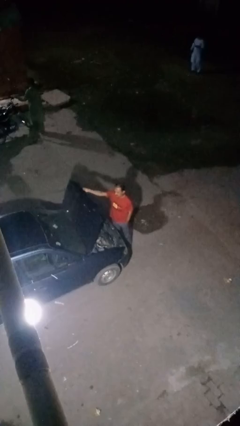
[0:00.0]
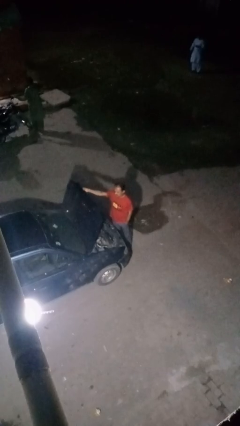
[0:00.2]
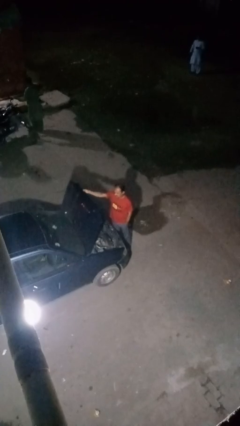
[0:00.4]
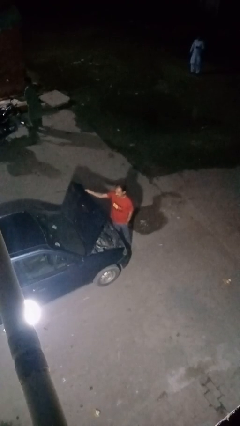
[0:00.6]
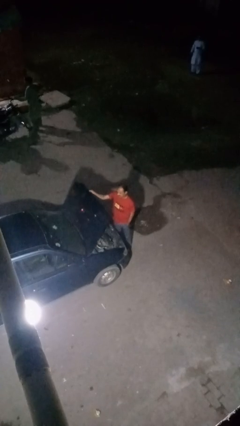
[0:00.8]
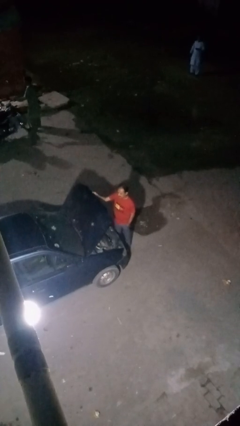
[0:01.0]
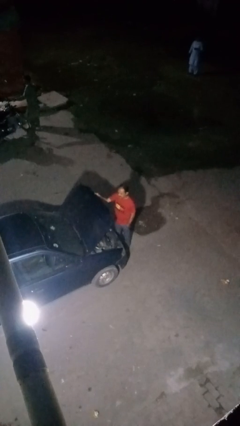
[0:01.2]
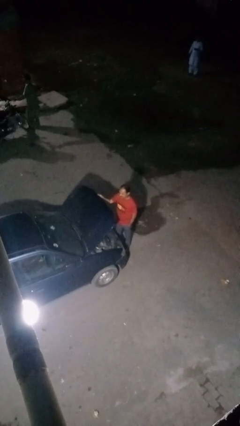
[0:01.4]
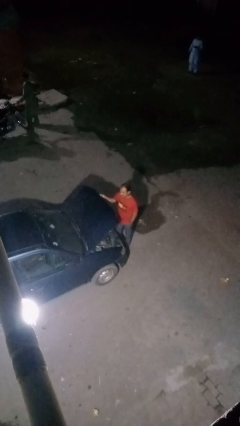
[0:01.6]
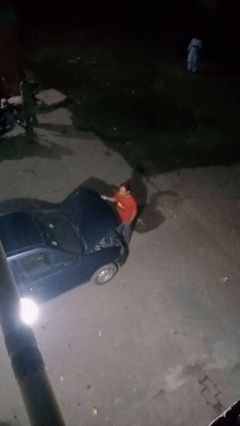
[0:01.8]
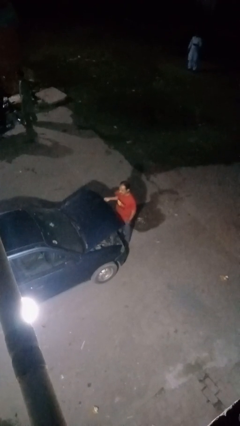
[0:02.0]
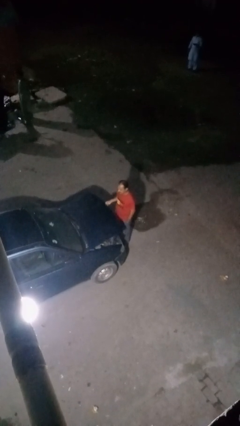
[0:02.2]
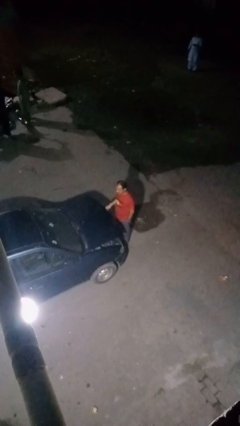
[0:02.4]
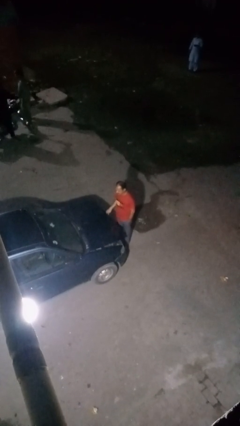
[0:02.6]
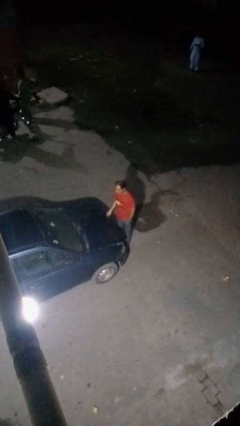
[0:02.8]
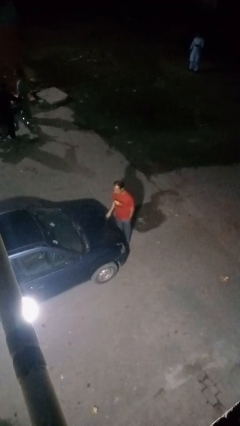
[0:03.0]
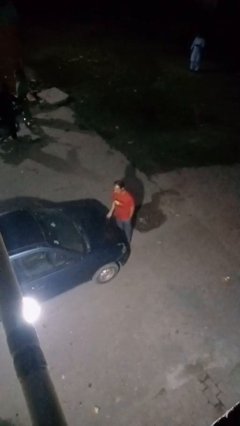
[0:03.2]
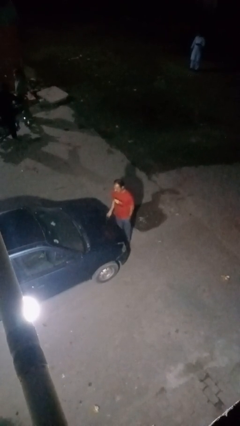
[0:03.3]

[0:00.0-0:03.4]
person closes car hood

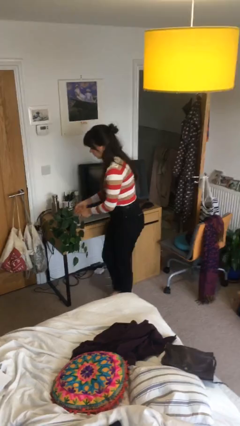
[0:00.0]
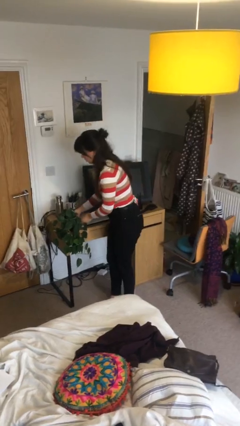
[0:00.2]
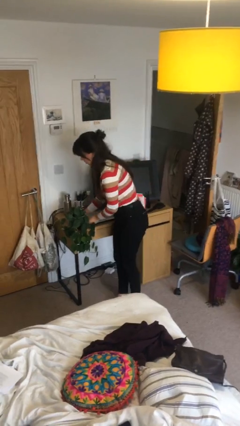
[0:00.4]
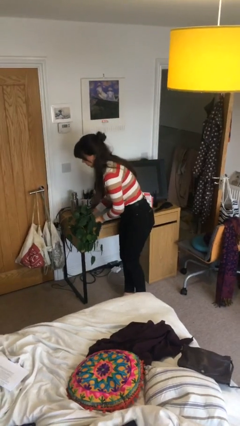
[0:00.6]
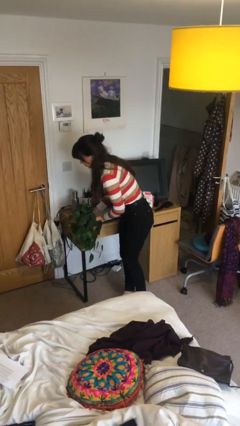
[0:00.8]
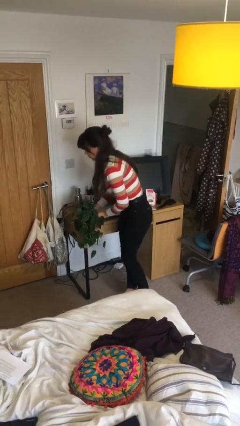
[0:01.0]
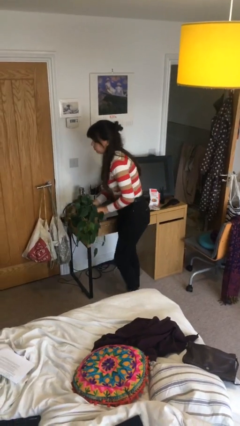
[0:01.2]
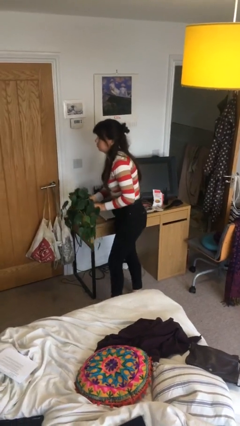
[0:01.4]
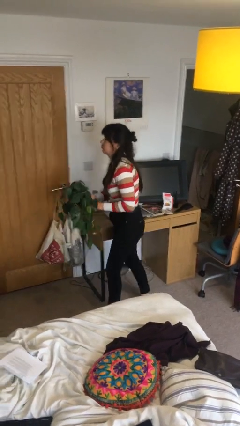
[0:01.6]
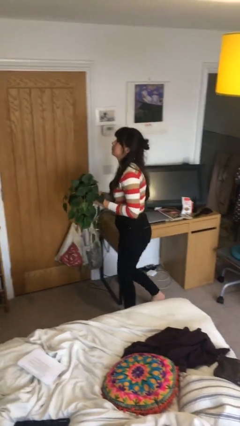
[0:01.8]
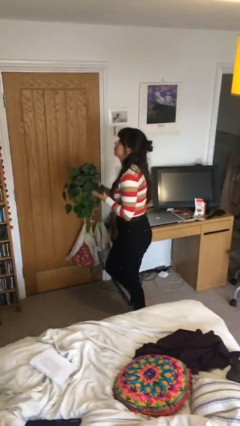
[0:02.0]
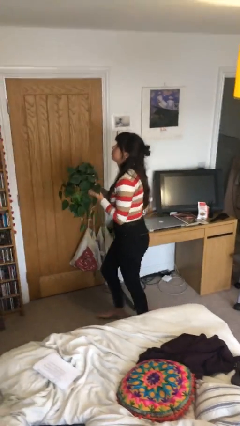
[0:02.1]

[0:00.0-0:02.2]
person picks up object from table

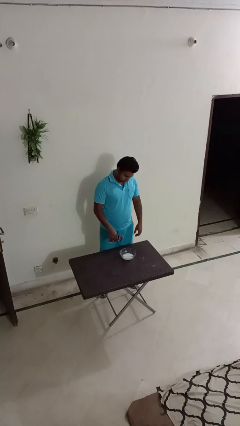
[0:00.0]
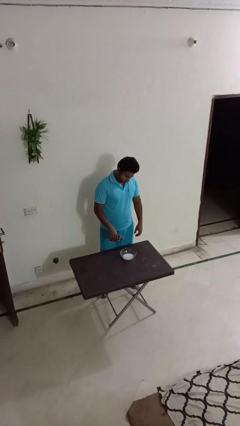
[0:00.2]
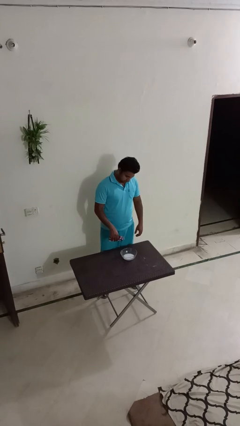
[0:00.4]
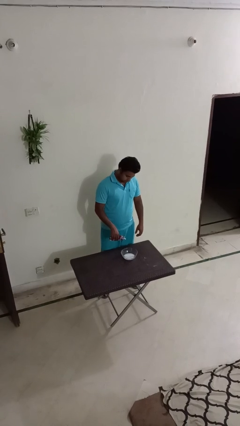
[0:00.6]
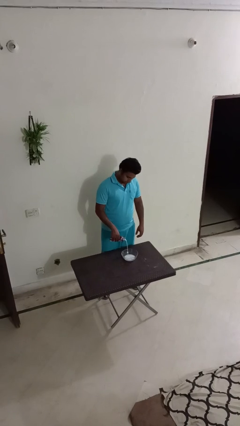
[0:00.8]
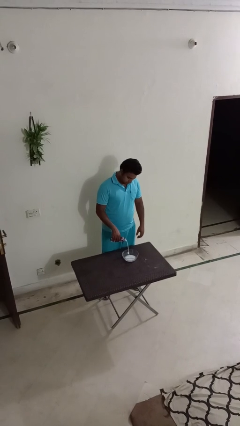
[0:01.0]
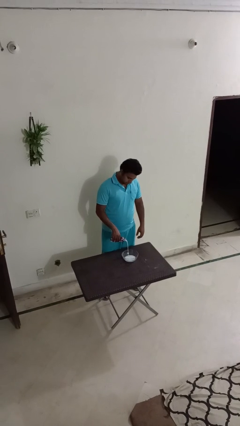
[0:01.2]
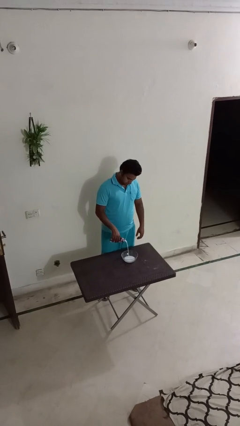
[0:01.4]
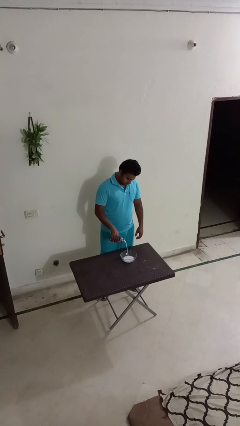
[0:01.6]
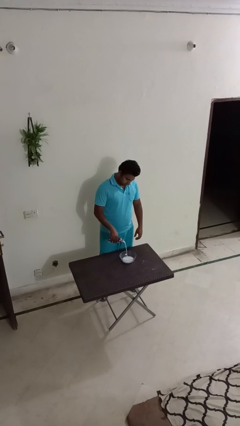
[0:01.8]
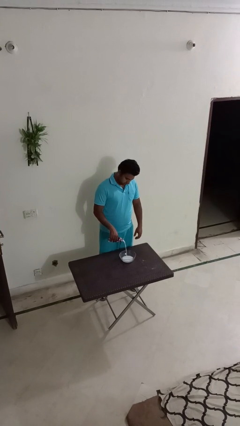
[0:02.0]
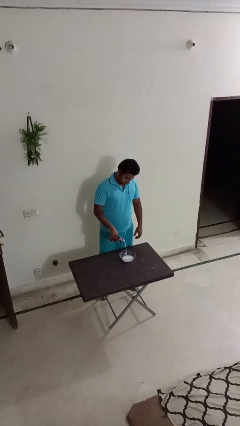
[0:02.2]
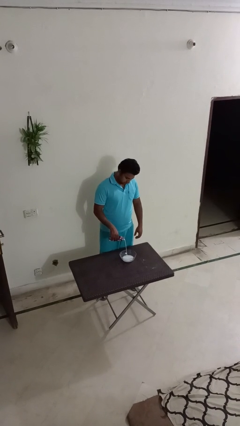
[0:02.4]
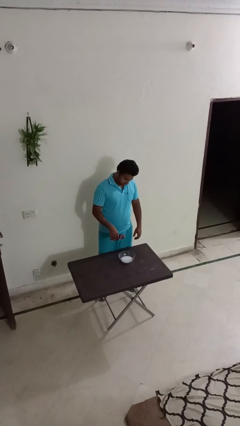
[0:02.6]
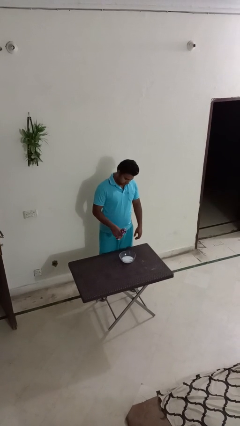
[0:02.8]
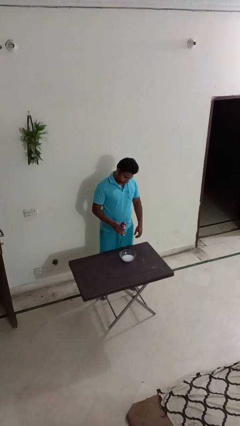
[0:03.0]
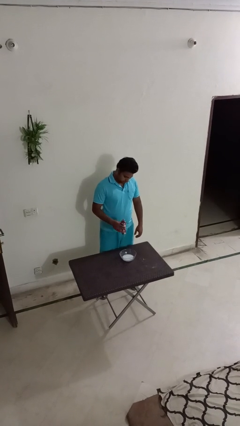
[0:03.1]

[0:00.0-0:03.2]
person pours into bowl

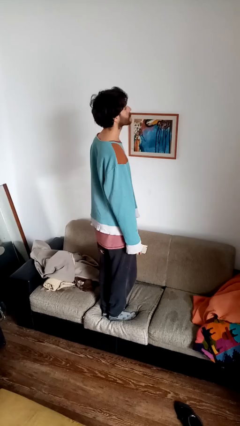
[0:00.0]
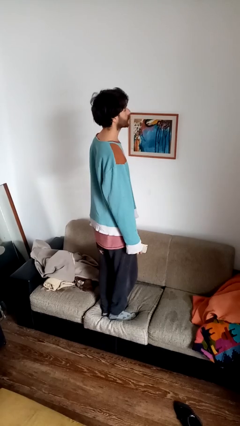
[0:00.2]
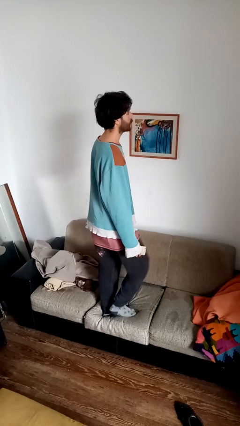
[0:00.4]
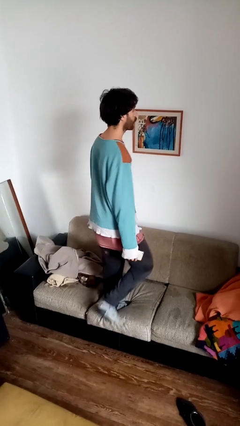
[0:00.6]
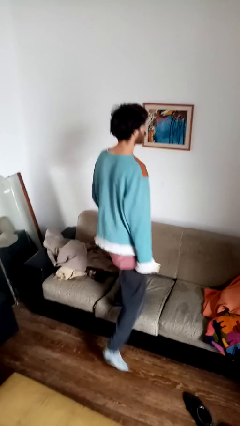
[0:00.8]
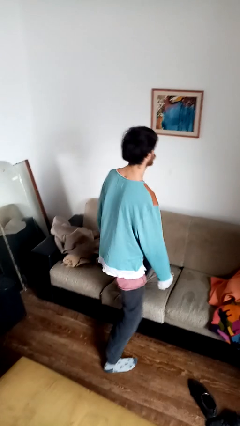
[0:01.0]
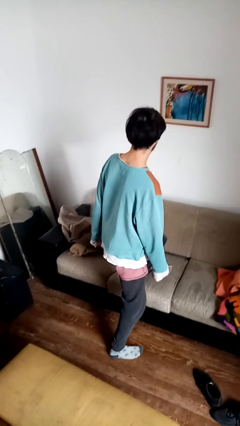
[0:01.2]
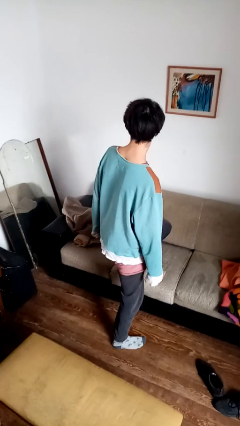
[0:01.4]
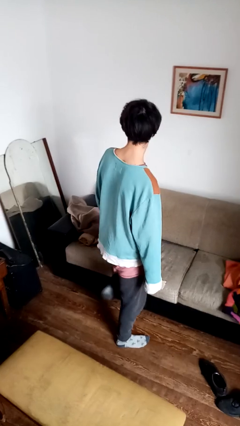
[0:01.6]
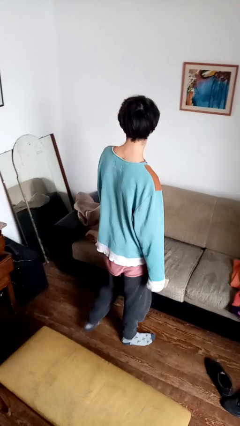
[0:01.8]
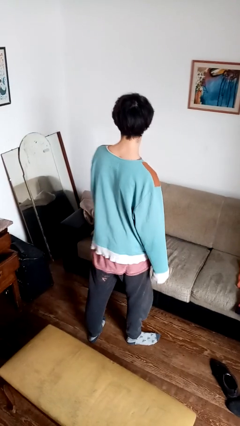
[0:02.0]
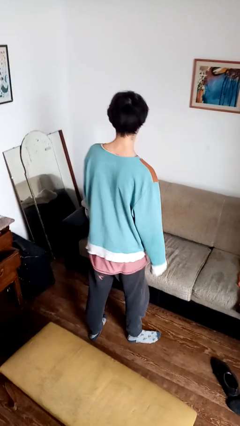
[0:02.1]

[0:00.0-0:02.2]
person climbs off couch

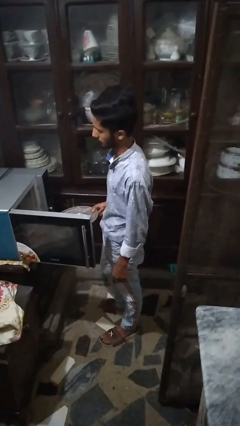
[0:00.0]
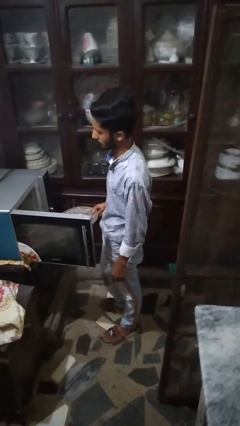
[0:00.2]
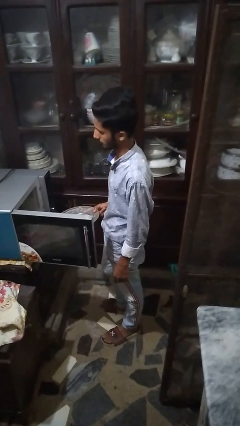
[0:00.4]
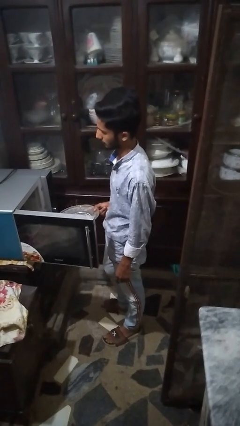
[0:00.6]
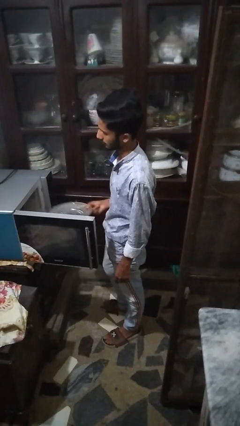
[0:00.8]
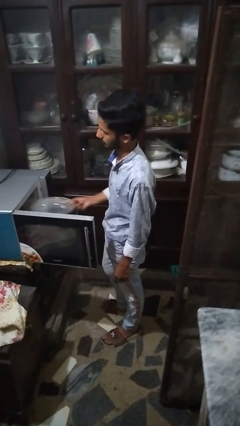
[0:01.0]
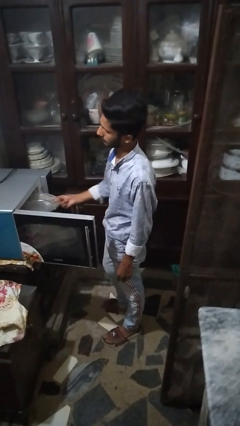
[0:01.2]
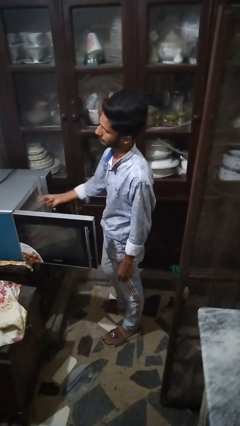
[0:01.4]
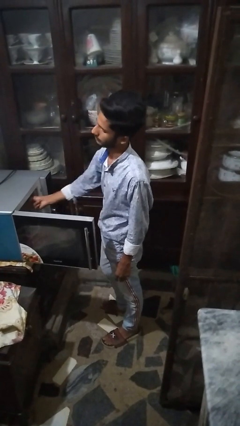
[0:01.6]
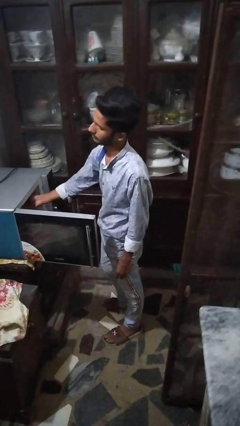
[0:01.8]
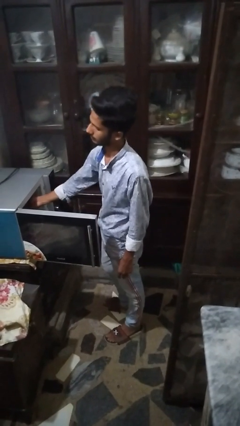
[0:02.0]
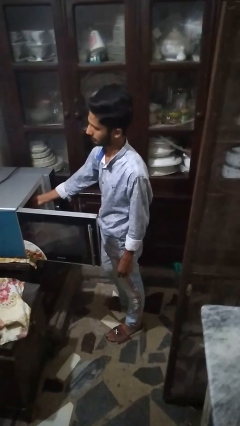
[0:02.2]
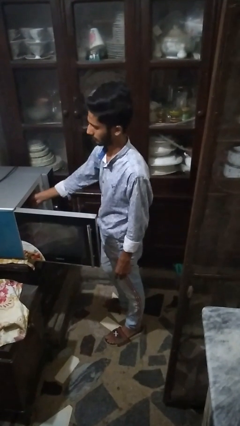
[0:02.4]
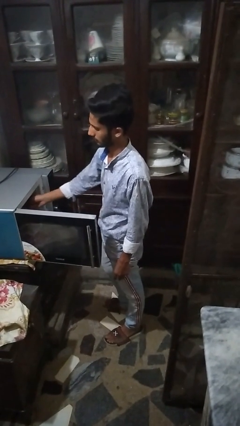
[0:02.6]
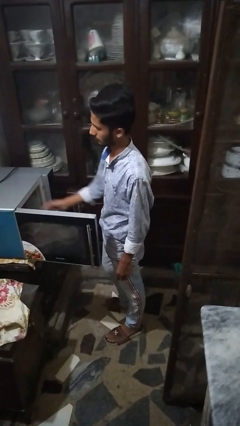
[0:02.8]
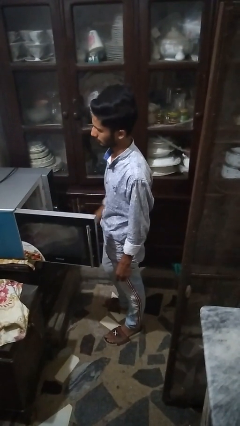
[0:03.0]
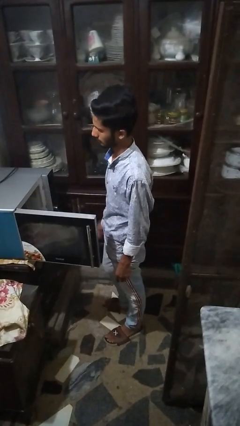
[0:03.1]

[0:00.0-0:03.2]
person puts object into microwave

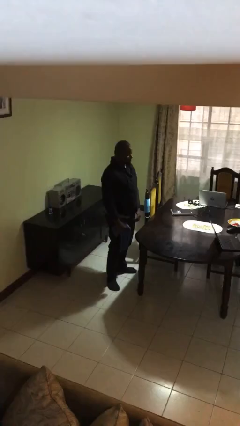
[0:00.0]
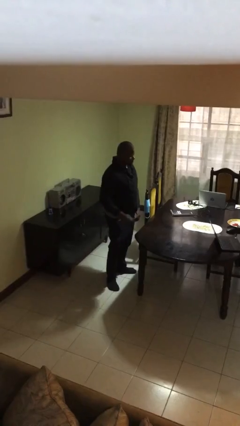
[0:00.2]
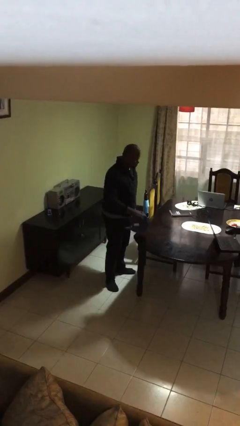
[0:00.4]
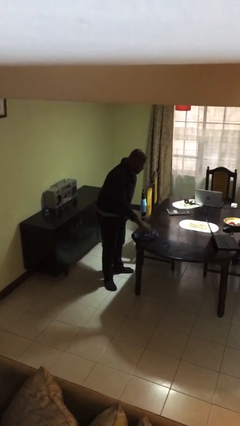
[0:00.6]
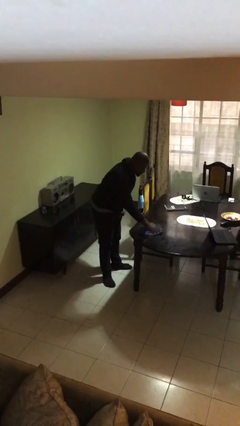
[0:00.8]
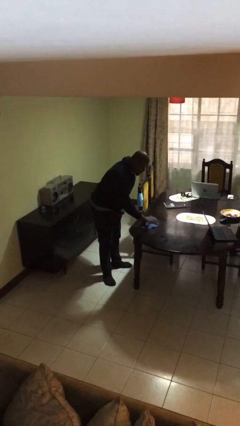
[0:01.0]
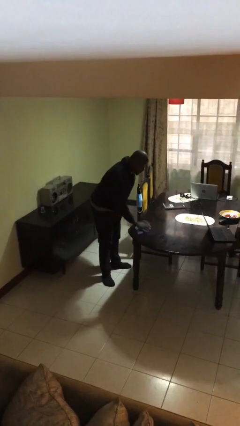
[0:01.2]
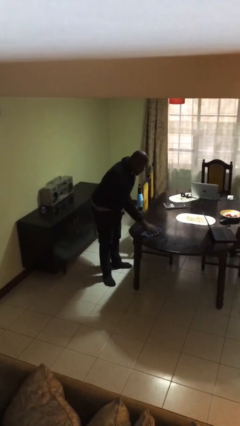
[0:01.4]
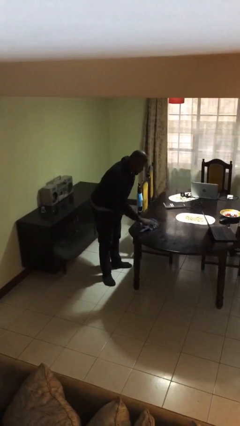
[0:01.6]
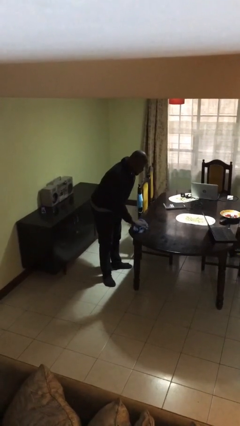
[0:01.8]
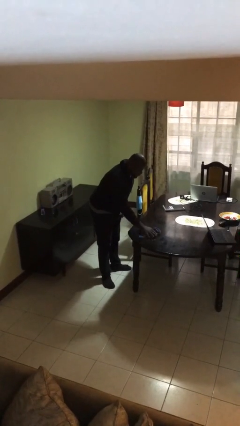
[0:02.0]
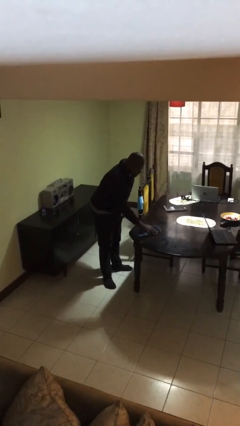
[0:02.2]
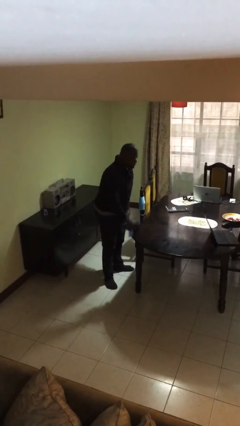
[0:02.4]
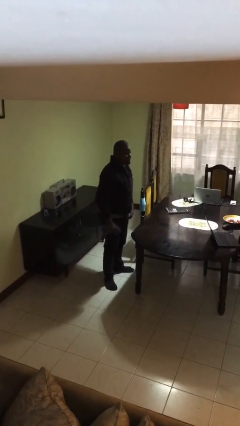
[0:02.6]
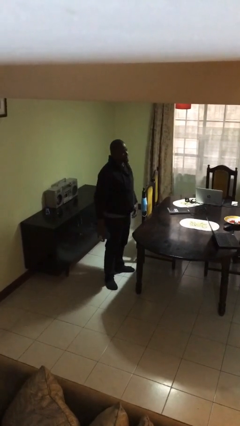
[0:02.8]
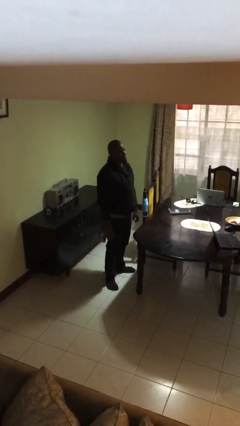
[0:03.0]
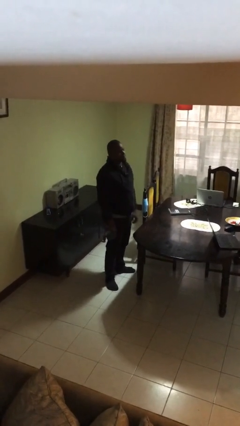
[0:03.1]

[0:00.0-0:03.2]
person cleans table with rag
